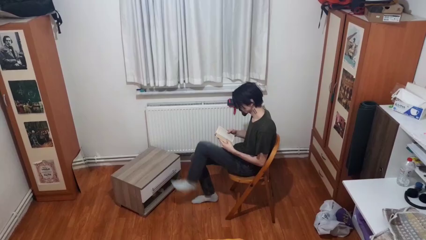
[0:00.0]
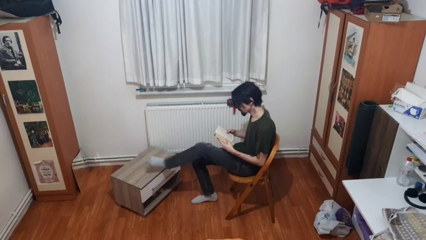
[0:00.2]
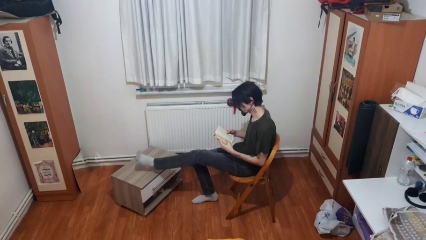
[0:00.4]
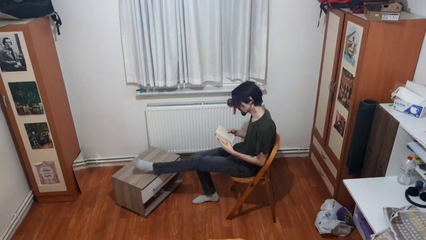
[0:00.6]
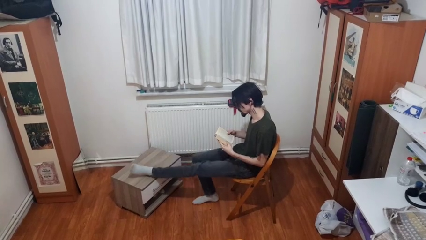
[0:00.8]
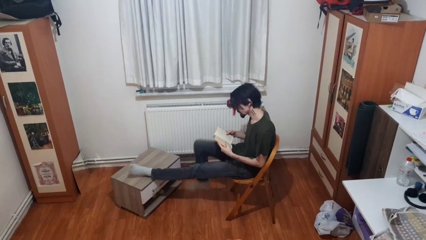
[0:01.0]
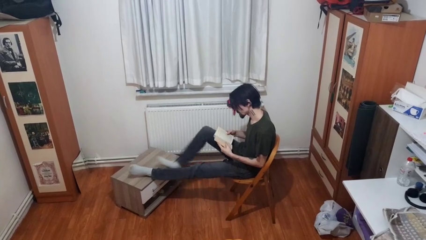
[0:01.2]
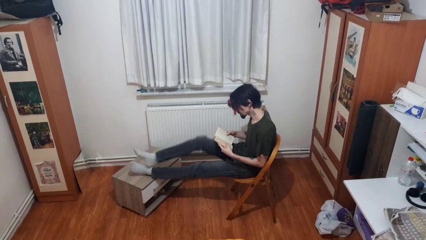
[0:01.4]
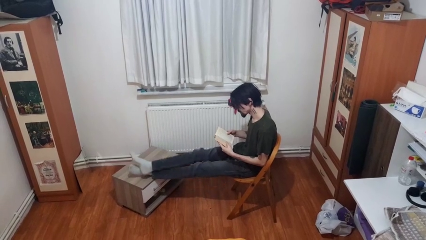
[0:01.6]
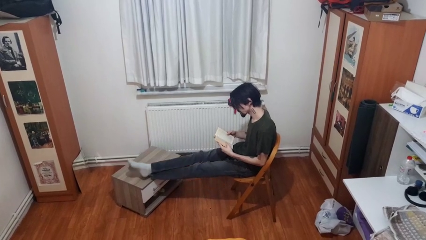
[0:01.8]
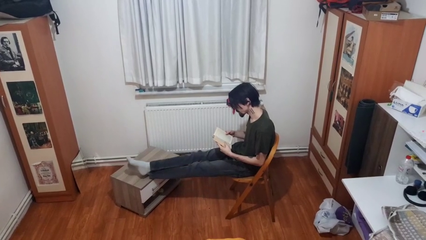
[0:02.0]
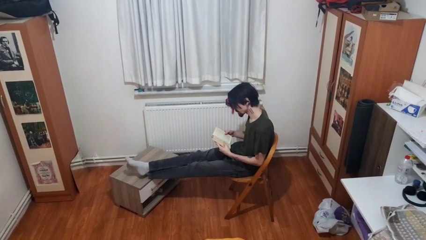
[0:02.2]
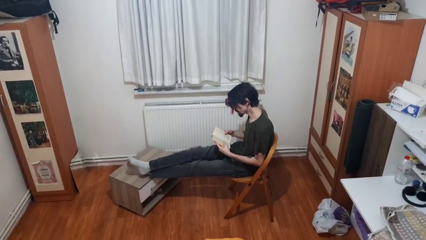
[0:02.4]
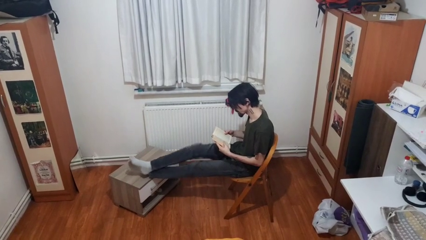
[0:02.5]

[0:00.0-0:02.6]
person puts feet up

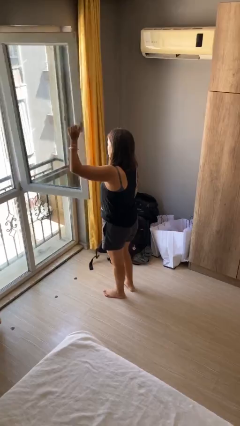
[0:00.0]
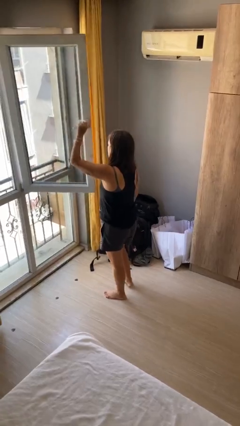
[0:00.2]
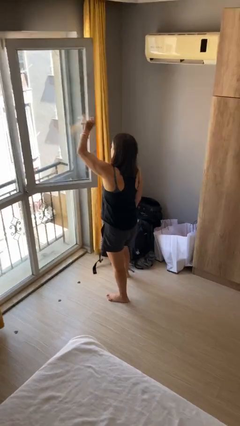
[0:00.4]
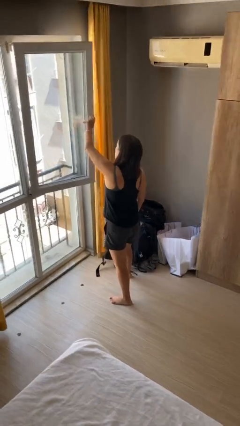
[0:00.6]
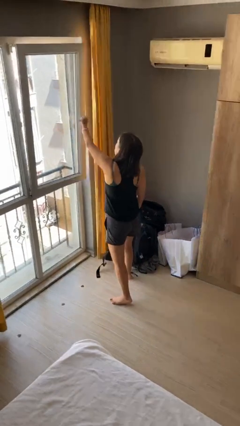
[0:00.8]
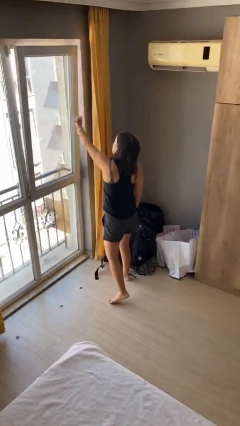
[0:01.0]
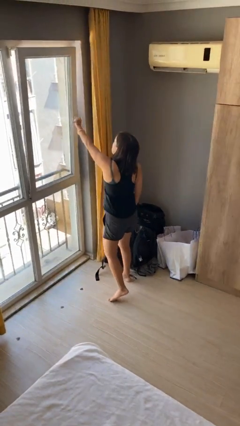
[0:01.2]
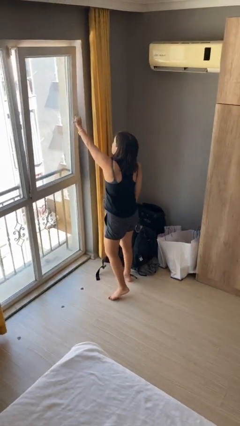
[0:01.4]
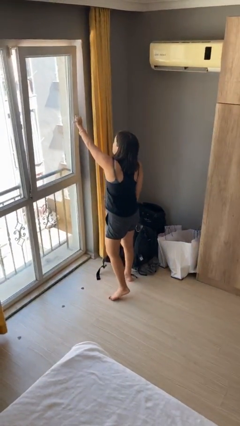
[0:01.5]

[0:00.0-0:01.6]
person closes home window

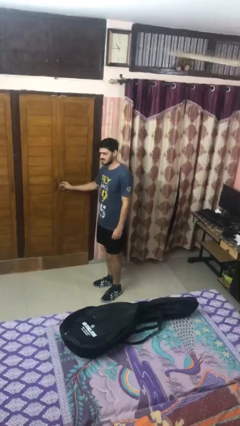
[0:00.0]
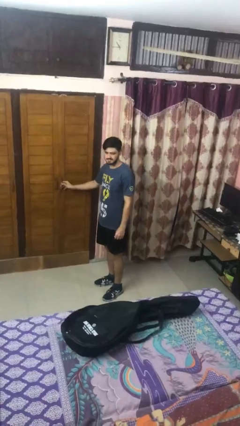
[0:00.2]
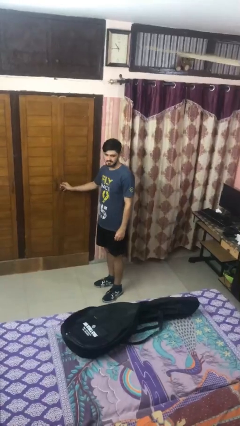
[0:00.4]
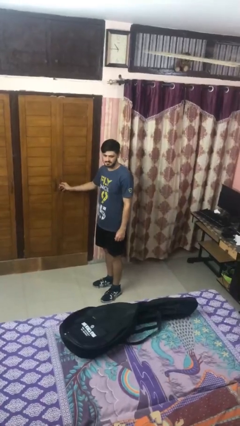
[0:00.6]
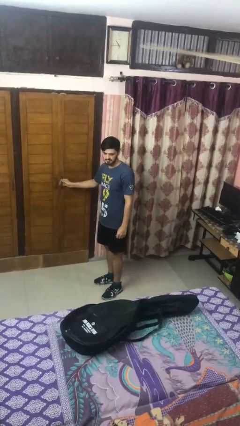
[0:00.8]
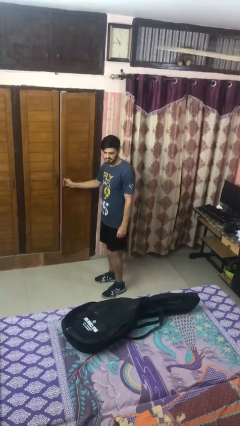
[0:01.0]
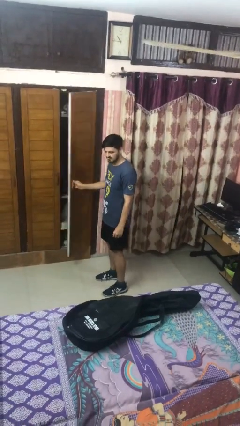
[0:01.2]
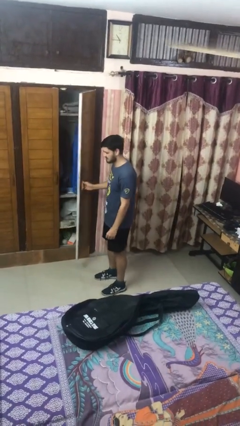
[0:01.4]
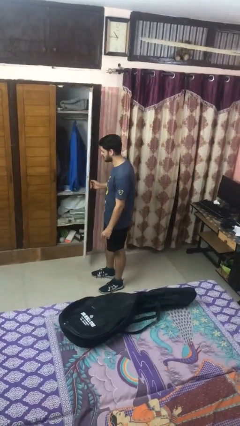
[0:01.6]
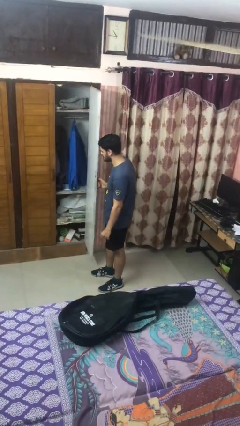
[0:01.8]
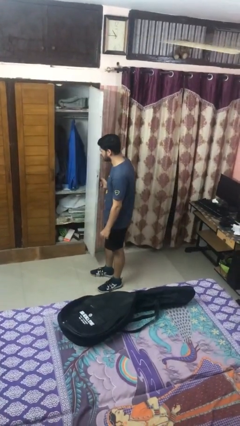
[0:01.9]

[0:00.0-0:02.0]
person opens closet door

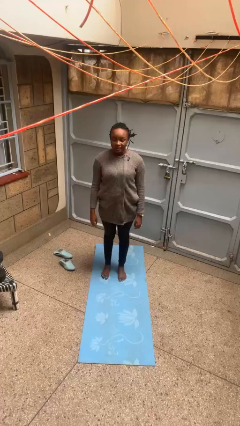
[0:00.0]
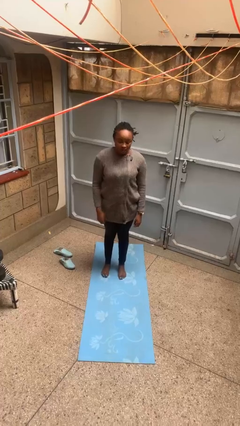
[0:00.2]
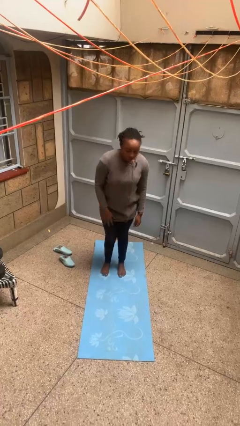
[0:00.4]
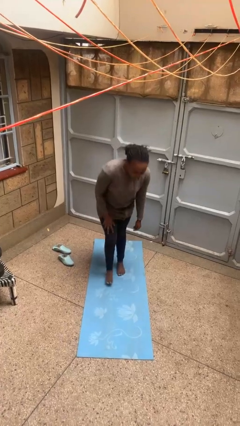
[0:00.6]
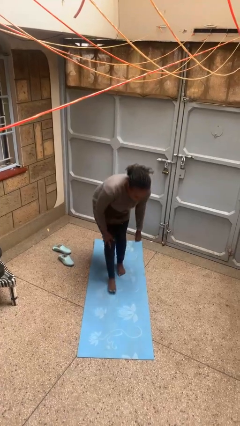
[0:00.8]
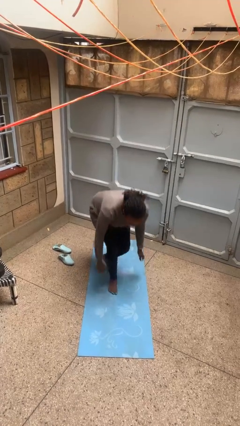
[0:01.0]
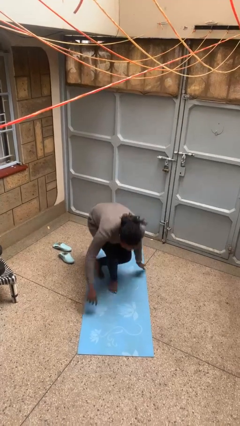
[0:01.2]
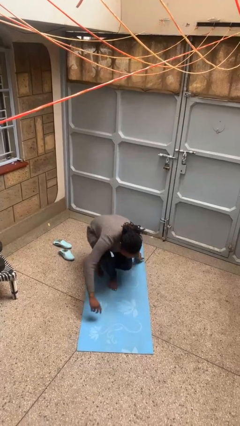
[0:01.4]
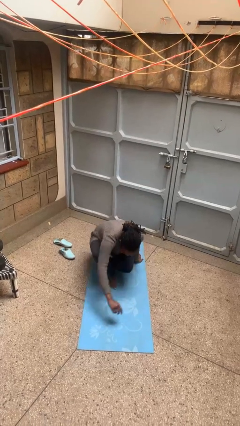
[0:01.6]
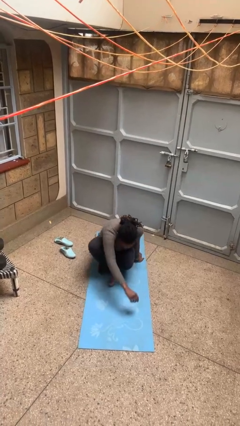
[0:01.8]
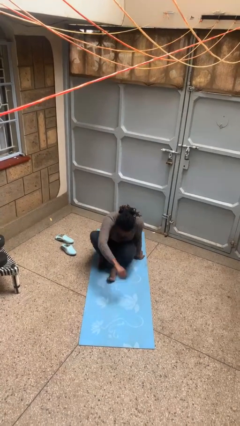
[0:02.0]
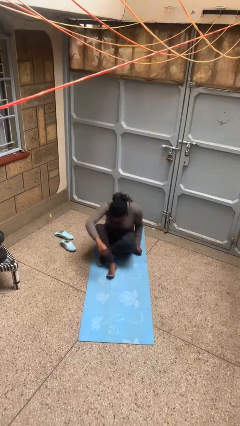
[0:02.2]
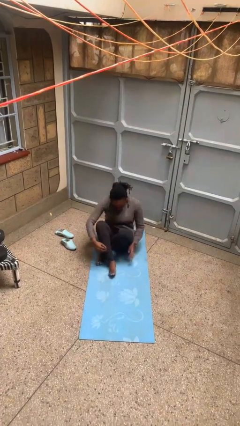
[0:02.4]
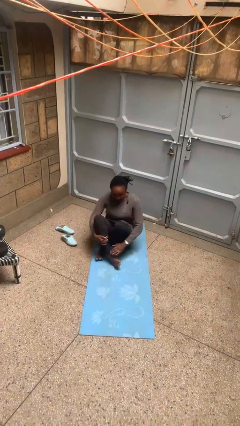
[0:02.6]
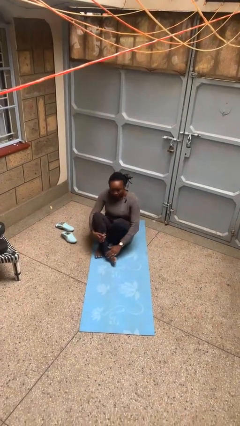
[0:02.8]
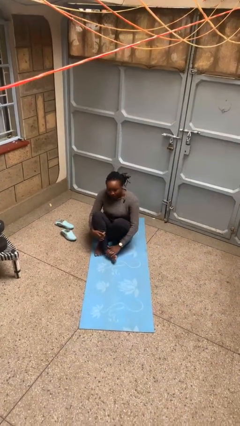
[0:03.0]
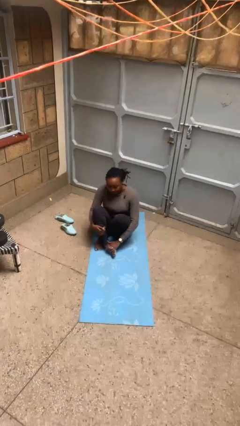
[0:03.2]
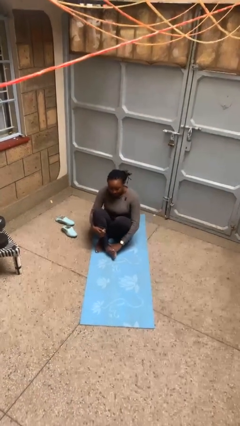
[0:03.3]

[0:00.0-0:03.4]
person sits crisscross

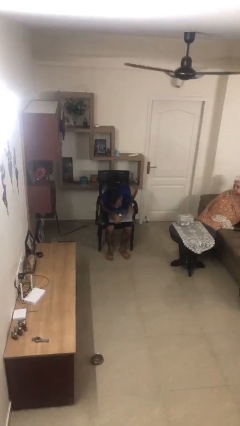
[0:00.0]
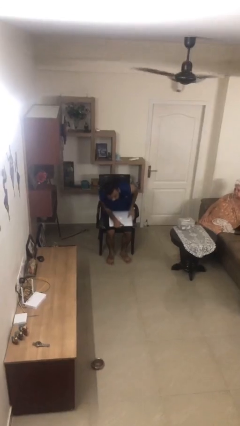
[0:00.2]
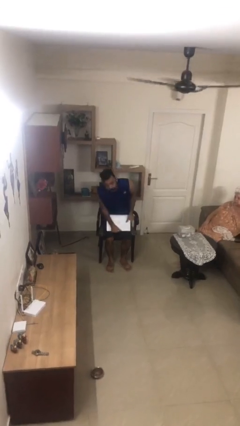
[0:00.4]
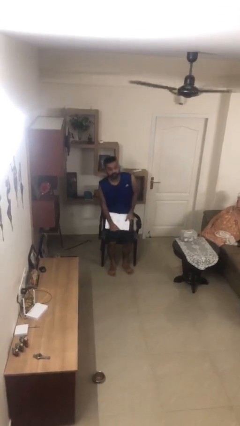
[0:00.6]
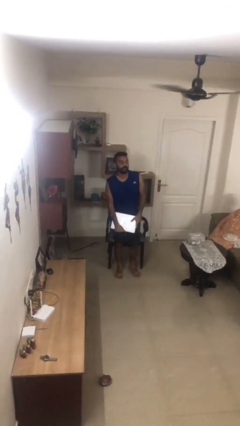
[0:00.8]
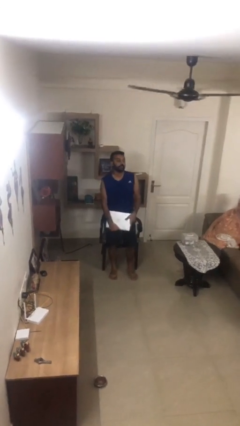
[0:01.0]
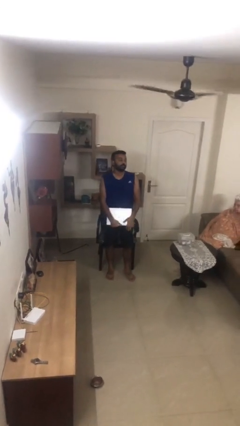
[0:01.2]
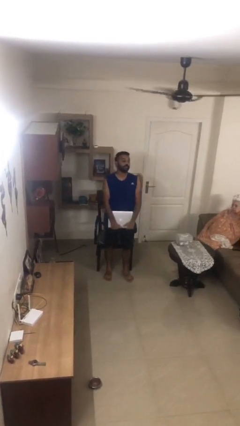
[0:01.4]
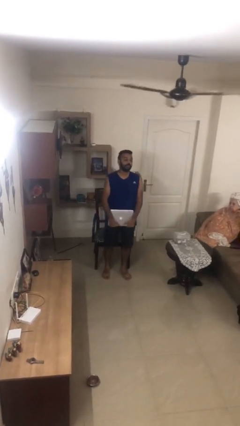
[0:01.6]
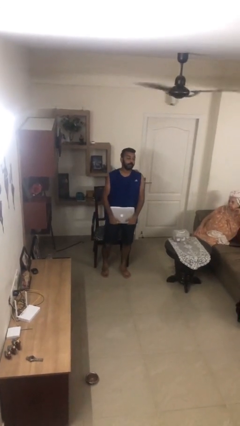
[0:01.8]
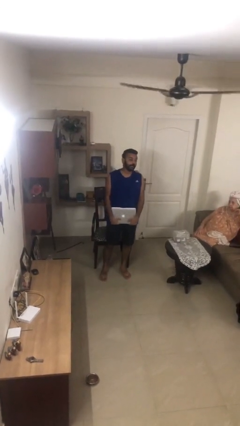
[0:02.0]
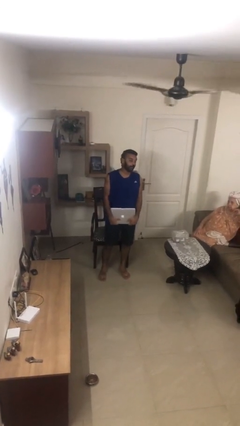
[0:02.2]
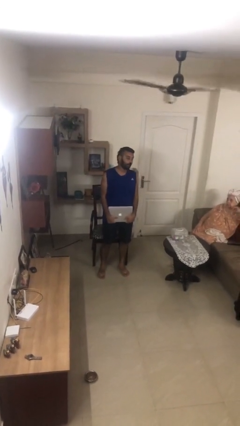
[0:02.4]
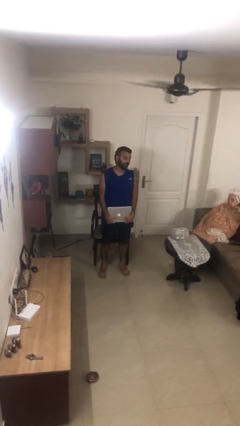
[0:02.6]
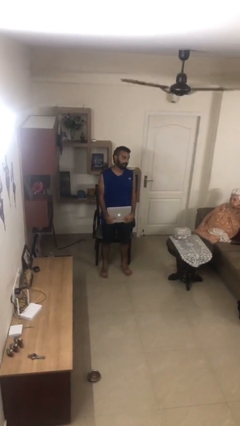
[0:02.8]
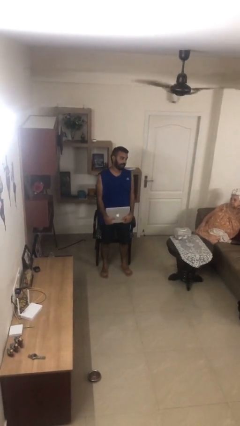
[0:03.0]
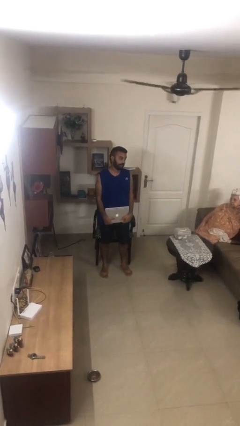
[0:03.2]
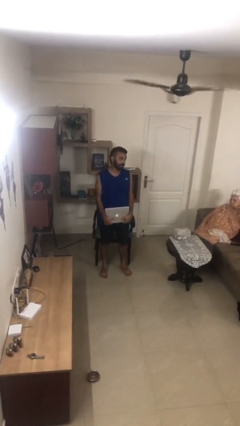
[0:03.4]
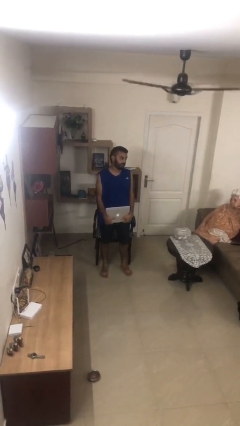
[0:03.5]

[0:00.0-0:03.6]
person stands up

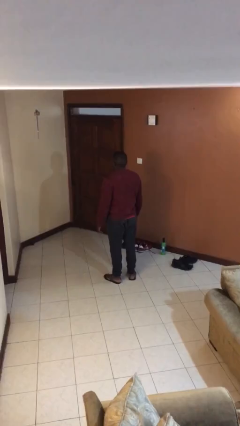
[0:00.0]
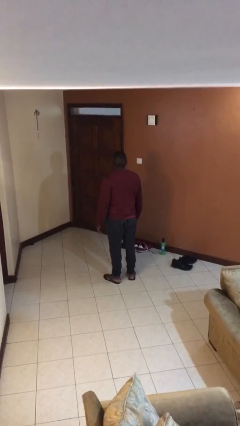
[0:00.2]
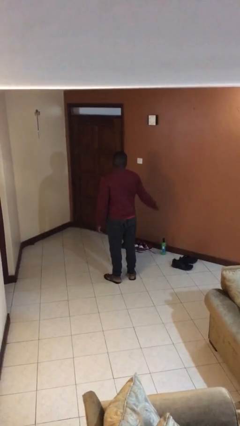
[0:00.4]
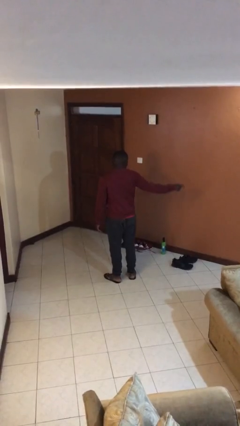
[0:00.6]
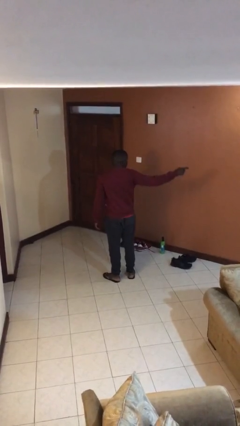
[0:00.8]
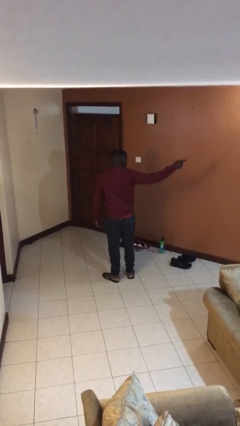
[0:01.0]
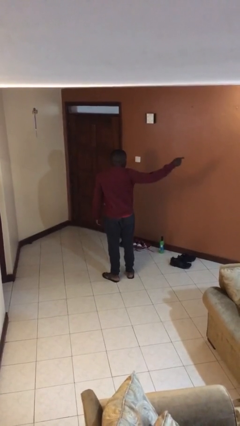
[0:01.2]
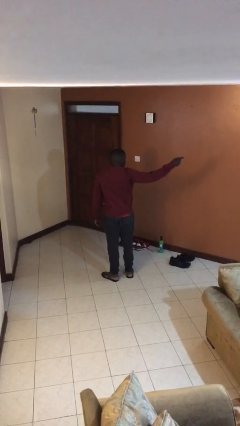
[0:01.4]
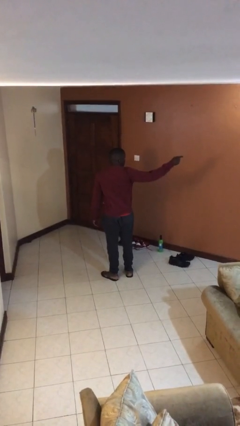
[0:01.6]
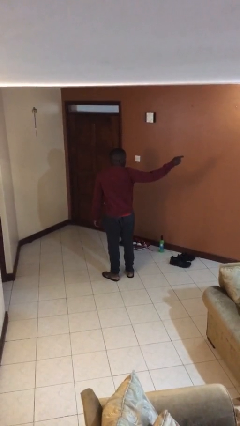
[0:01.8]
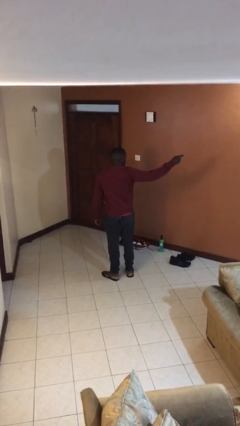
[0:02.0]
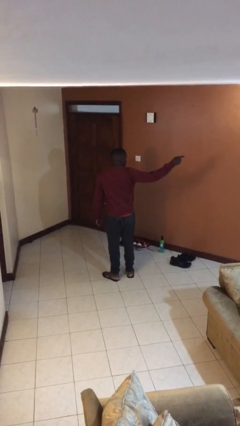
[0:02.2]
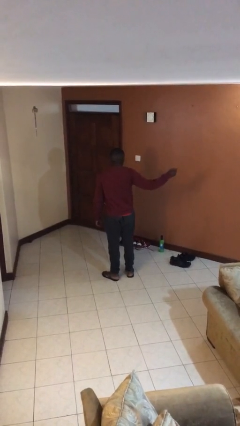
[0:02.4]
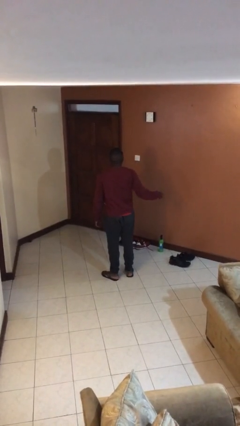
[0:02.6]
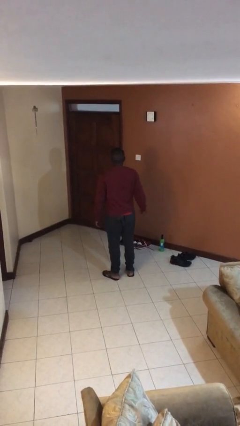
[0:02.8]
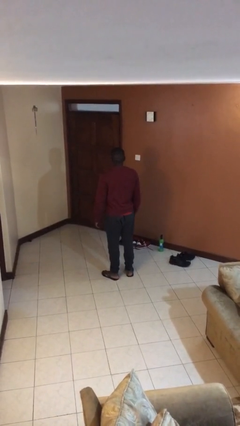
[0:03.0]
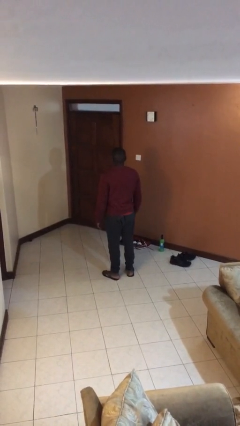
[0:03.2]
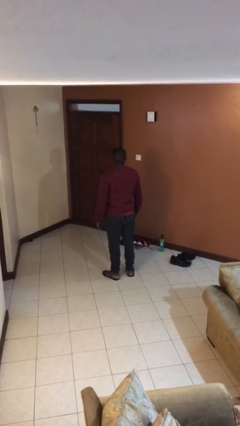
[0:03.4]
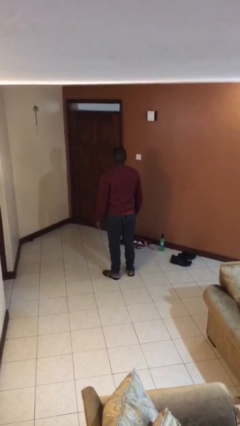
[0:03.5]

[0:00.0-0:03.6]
person points at person

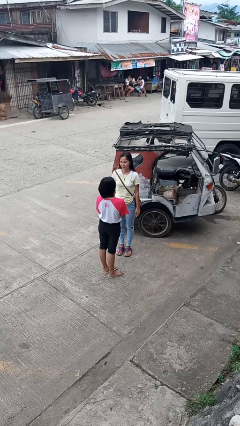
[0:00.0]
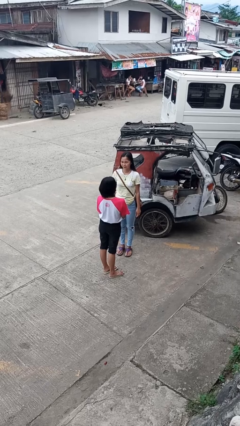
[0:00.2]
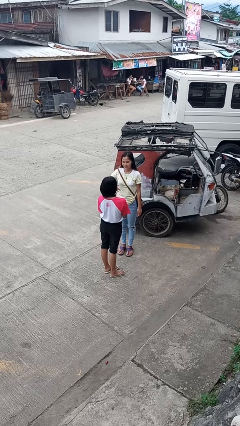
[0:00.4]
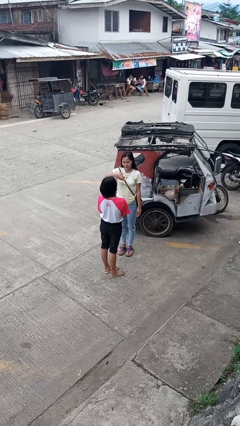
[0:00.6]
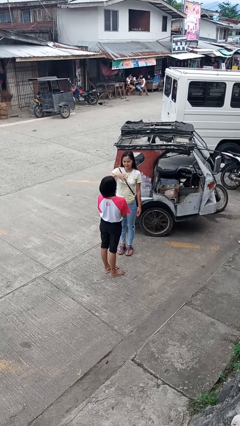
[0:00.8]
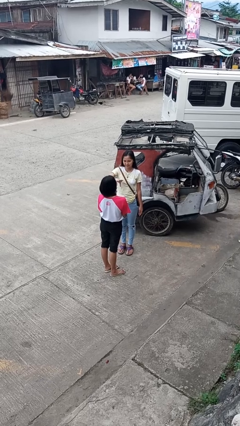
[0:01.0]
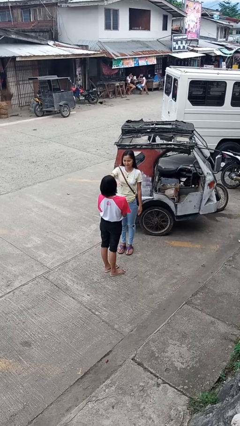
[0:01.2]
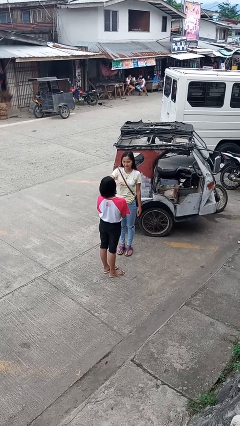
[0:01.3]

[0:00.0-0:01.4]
person shoves person
